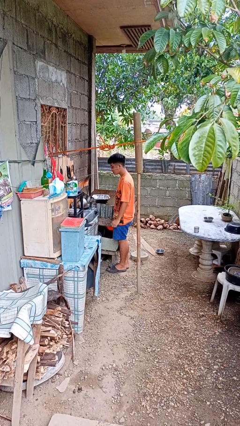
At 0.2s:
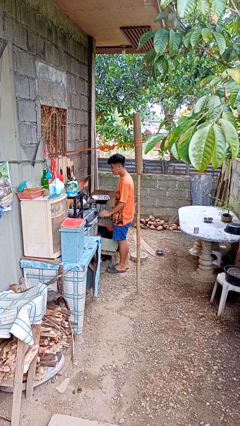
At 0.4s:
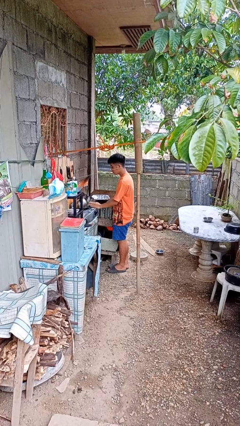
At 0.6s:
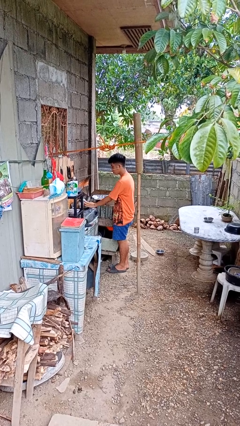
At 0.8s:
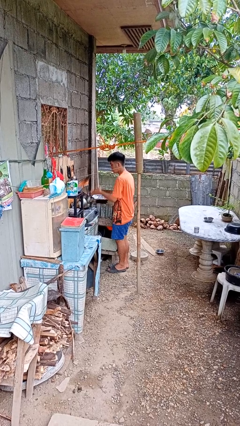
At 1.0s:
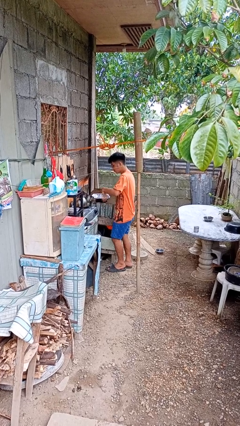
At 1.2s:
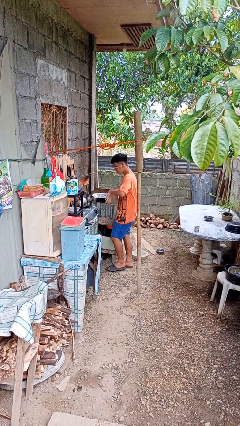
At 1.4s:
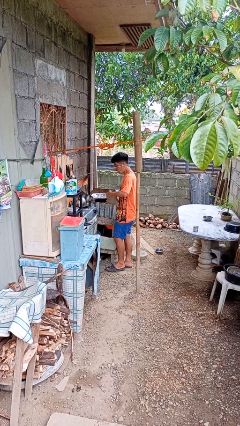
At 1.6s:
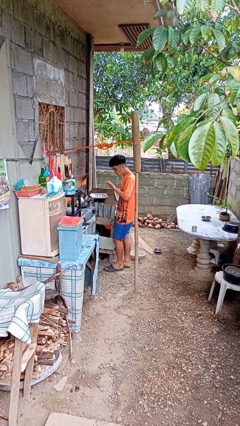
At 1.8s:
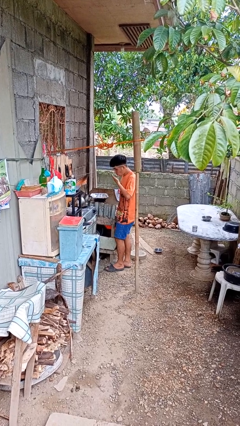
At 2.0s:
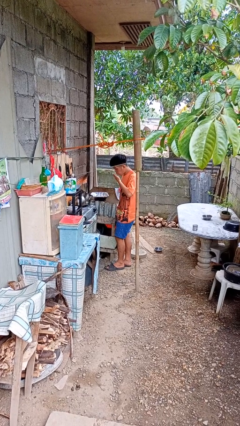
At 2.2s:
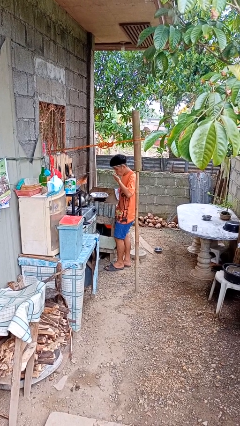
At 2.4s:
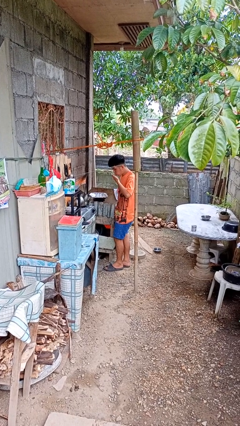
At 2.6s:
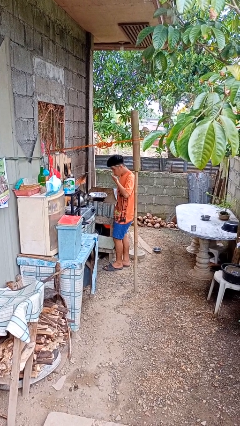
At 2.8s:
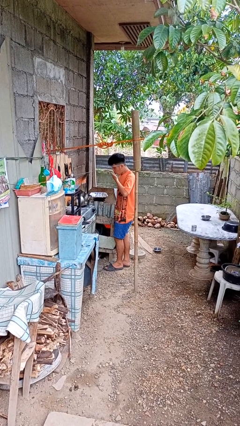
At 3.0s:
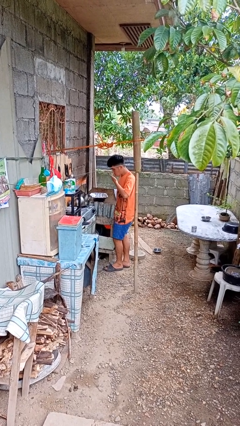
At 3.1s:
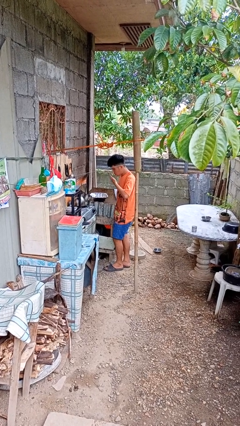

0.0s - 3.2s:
person burns hand

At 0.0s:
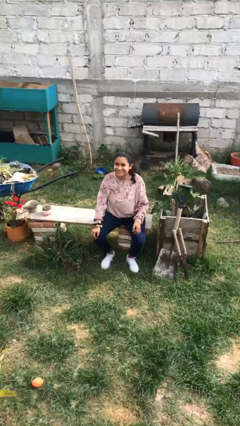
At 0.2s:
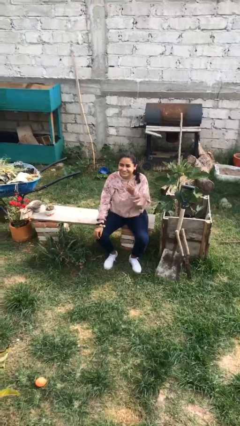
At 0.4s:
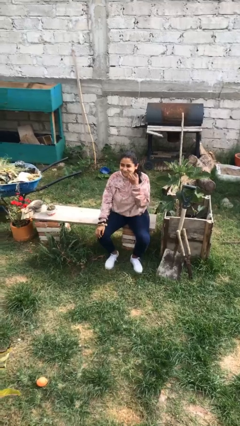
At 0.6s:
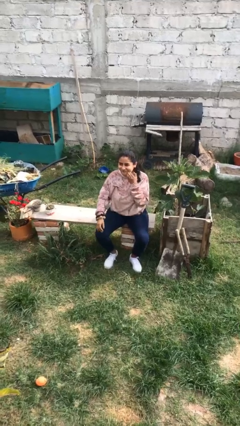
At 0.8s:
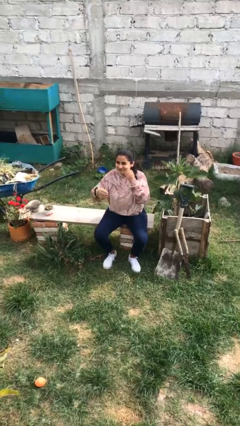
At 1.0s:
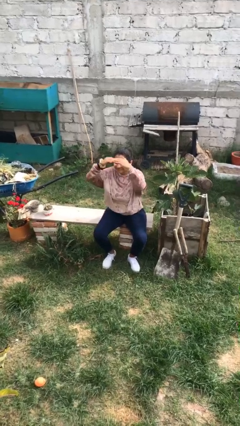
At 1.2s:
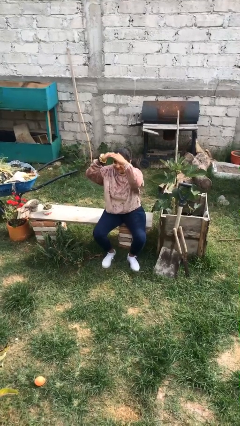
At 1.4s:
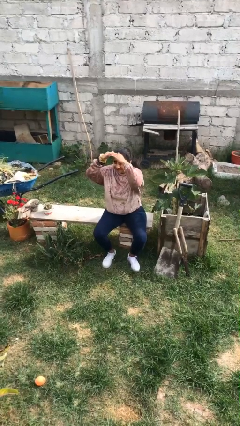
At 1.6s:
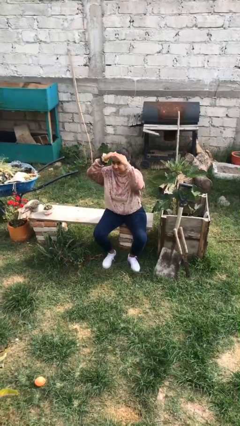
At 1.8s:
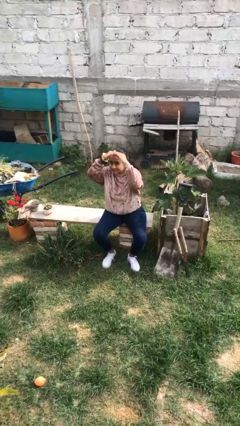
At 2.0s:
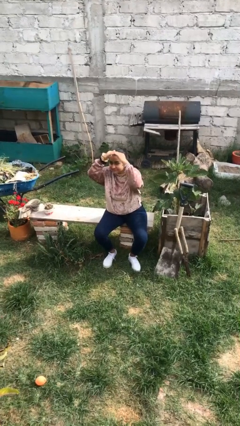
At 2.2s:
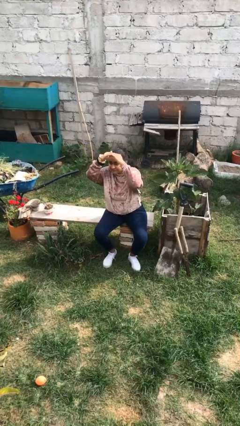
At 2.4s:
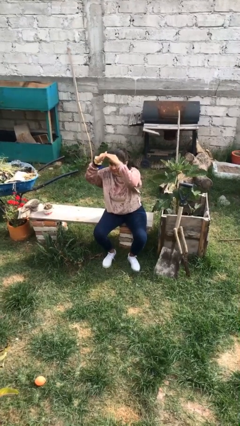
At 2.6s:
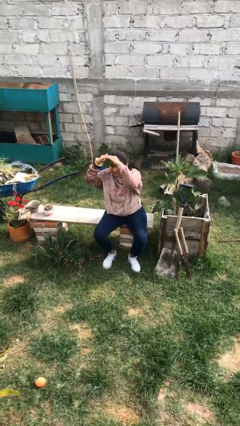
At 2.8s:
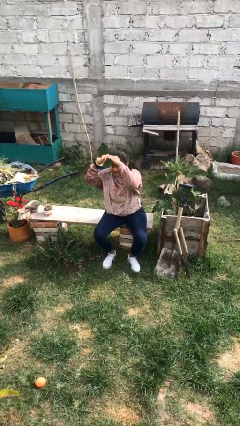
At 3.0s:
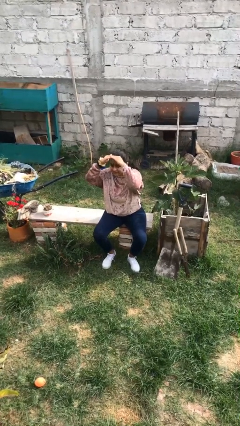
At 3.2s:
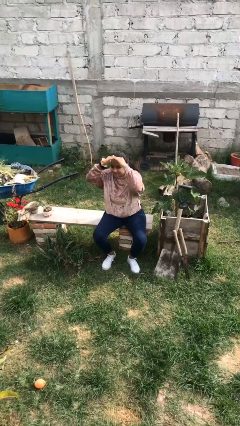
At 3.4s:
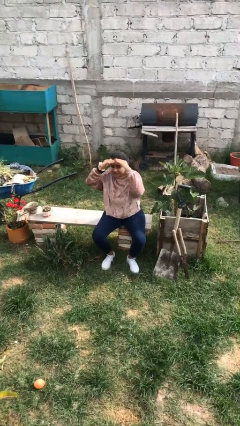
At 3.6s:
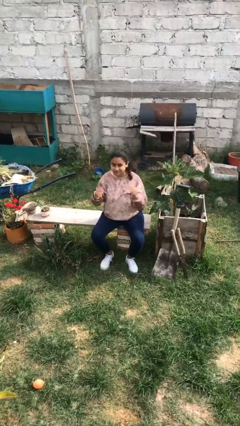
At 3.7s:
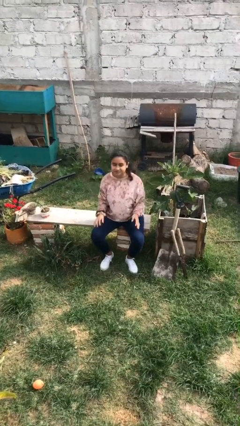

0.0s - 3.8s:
person shades eyes

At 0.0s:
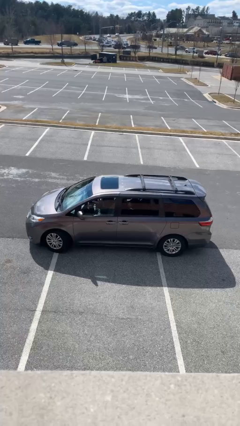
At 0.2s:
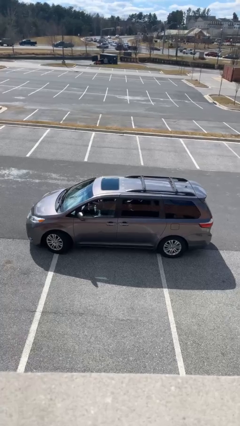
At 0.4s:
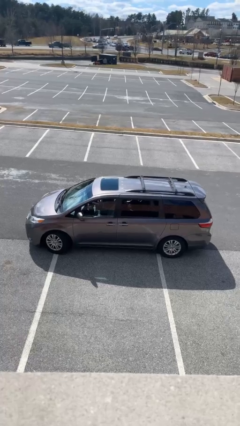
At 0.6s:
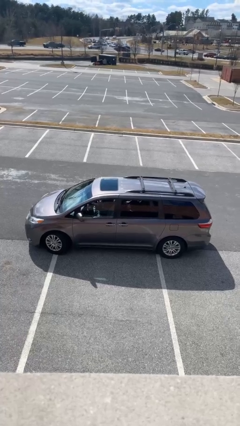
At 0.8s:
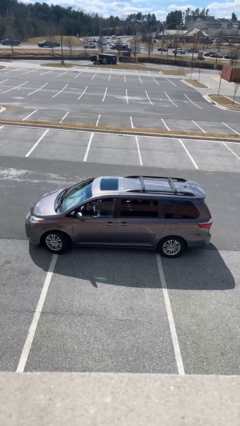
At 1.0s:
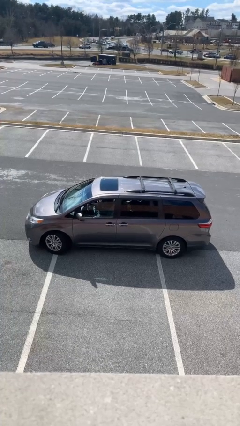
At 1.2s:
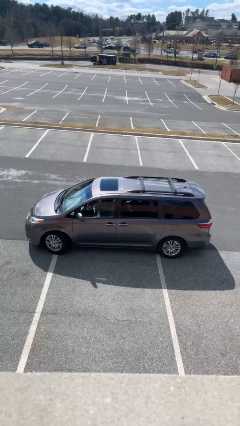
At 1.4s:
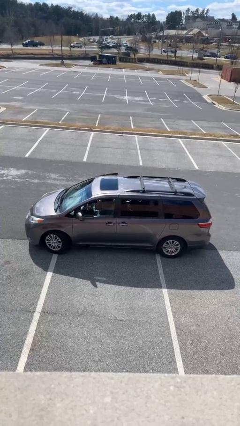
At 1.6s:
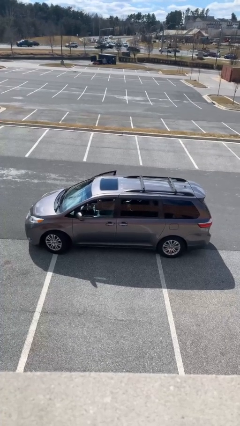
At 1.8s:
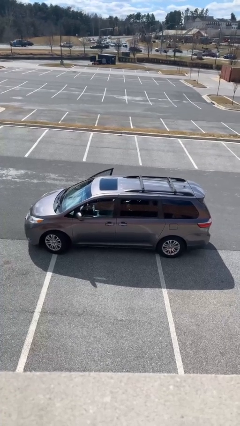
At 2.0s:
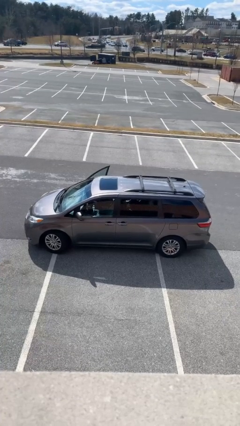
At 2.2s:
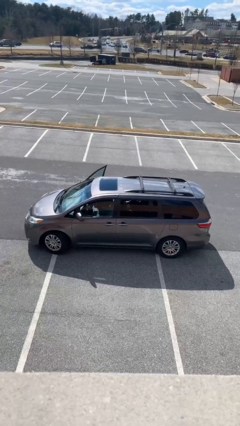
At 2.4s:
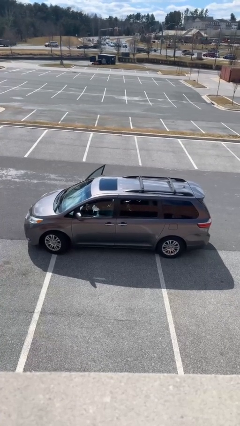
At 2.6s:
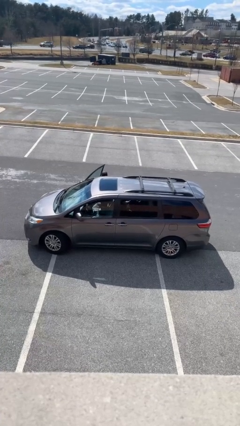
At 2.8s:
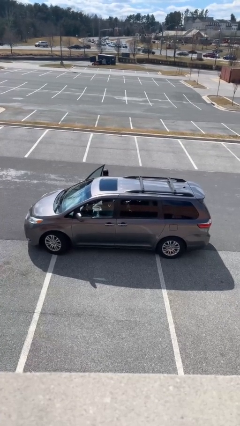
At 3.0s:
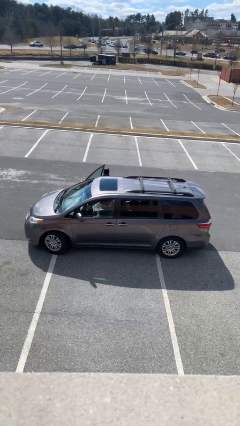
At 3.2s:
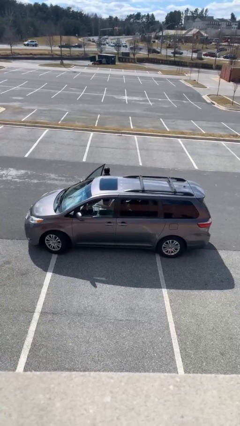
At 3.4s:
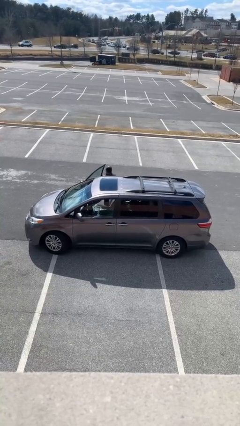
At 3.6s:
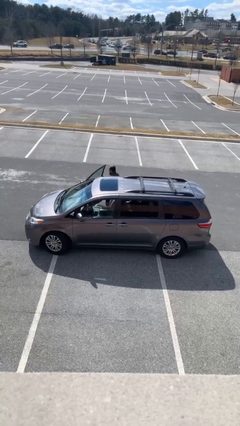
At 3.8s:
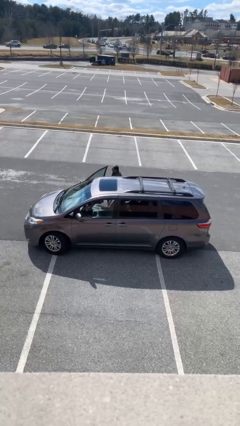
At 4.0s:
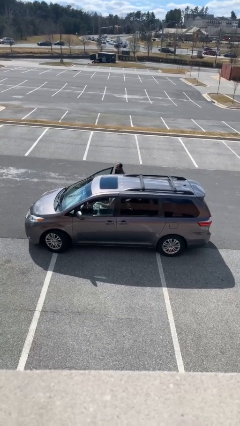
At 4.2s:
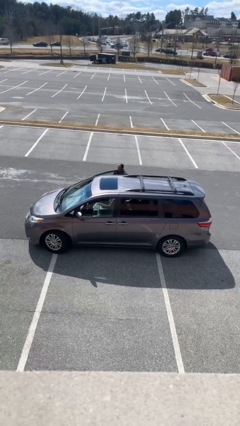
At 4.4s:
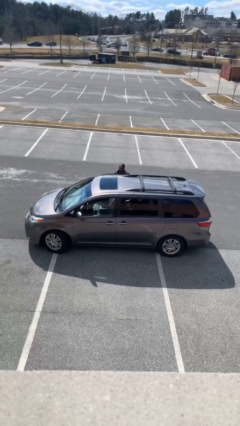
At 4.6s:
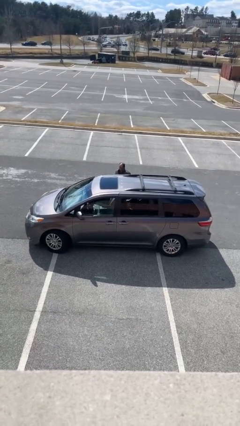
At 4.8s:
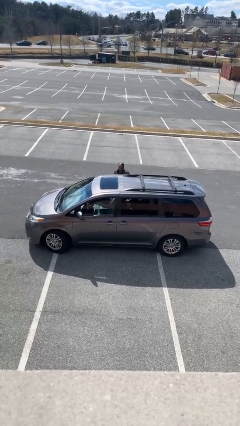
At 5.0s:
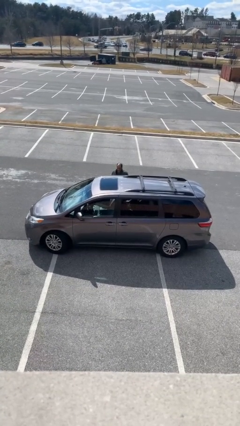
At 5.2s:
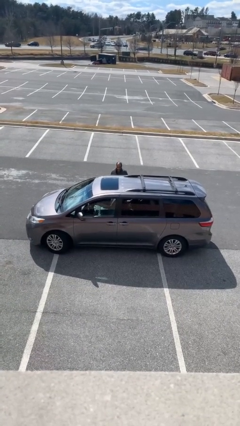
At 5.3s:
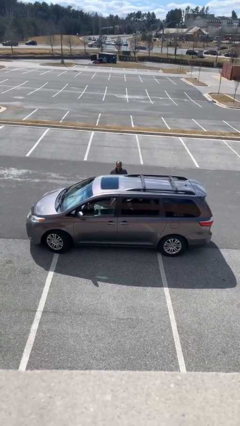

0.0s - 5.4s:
car drops off person

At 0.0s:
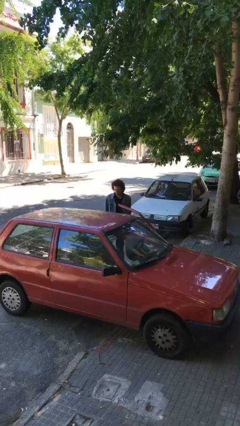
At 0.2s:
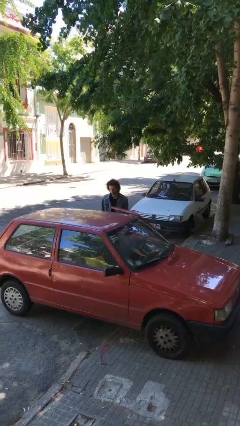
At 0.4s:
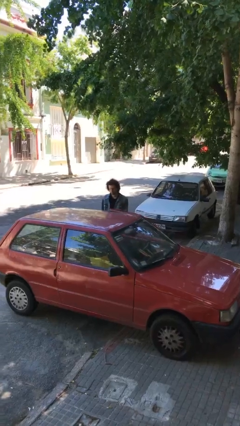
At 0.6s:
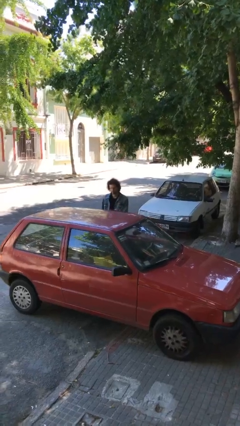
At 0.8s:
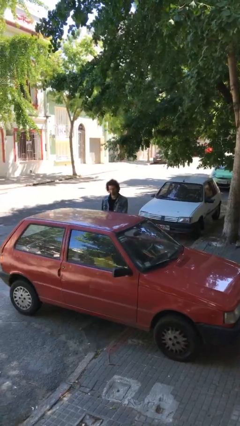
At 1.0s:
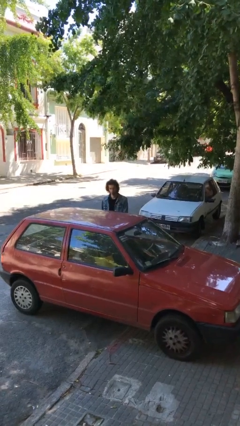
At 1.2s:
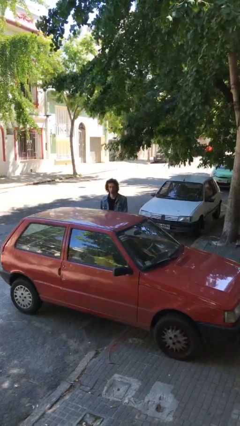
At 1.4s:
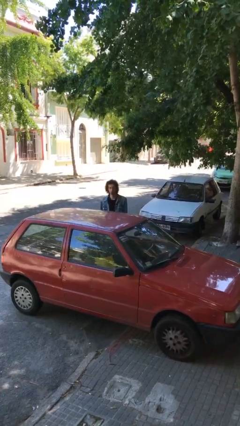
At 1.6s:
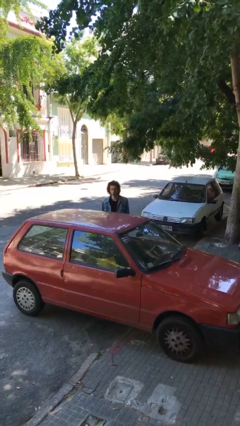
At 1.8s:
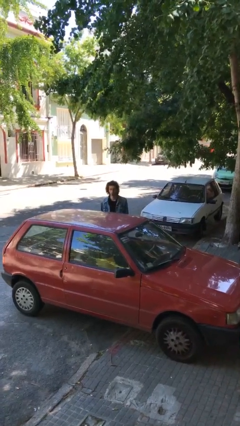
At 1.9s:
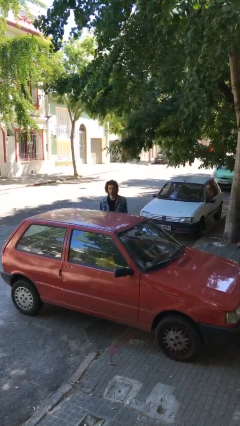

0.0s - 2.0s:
person closes car door

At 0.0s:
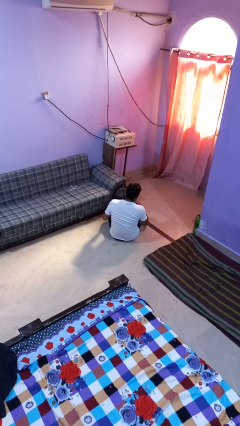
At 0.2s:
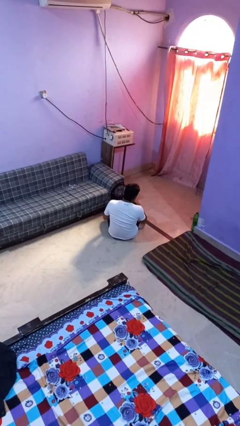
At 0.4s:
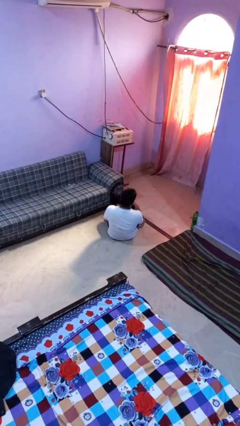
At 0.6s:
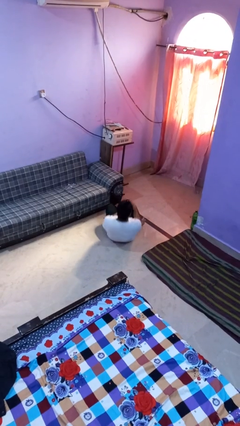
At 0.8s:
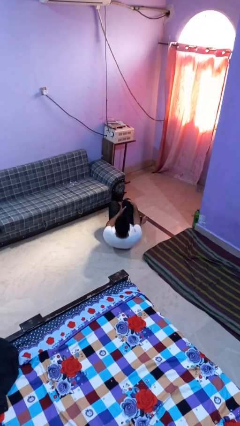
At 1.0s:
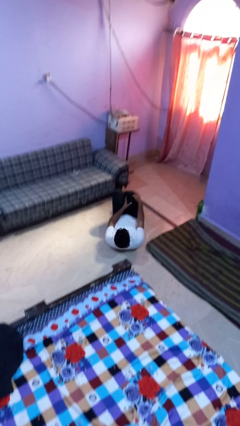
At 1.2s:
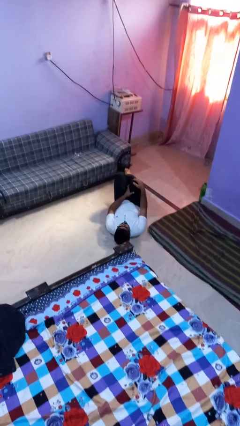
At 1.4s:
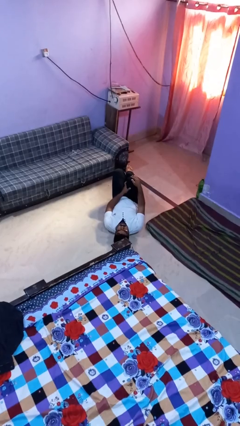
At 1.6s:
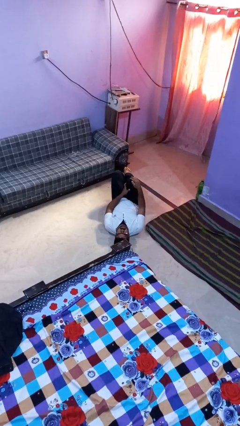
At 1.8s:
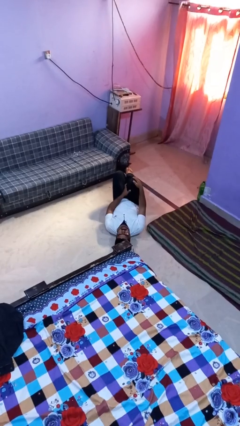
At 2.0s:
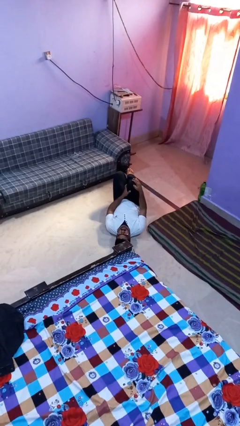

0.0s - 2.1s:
person lies down on floor

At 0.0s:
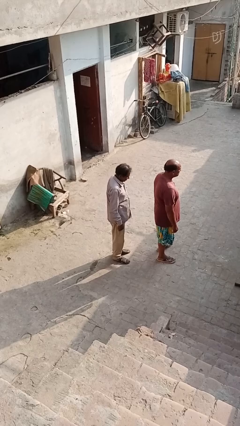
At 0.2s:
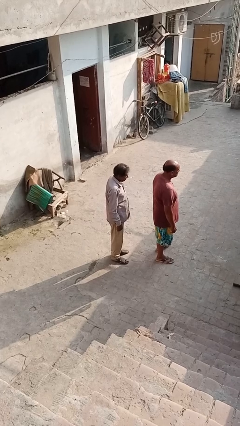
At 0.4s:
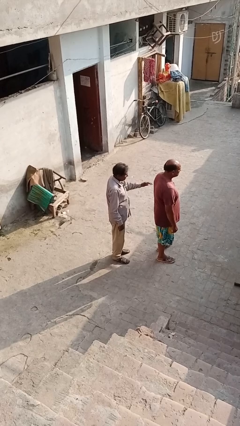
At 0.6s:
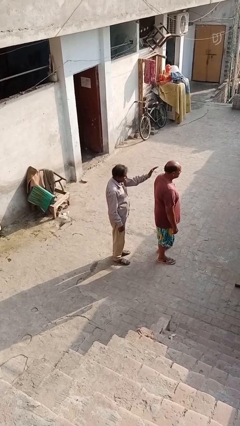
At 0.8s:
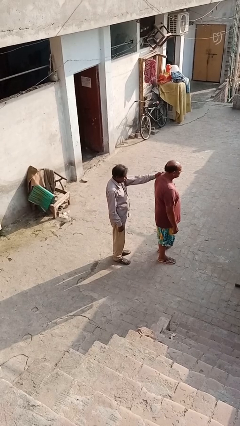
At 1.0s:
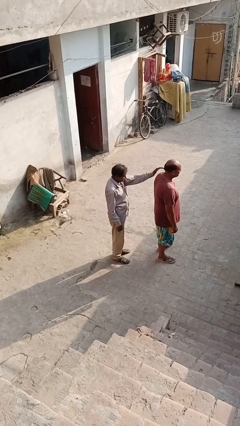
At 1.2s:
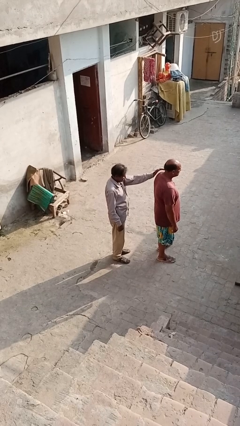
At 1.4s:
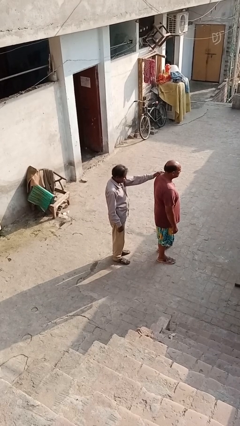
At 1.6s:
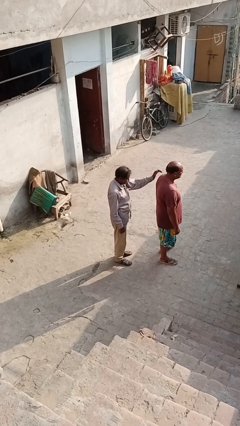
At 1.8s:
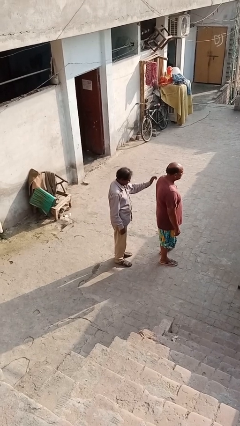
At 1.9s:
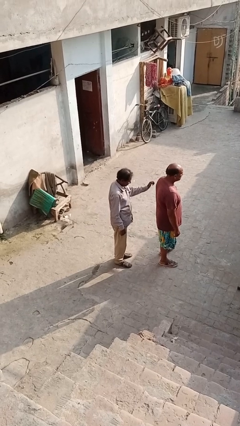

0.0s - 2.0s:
person touches back of person
